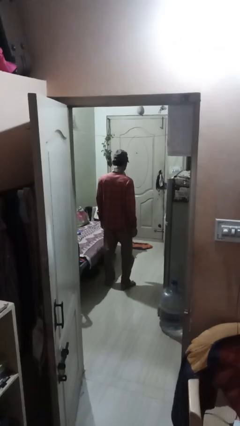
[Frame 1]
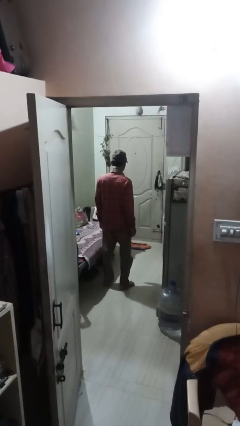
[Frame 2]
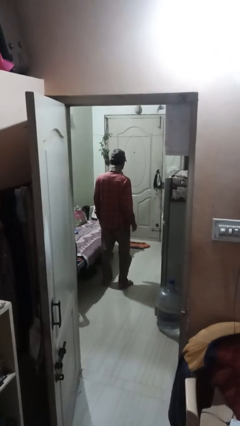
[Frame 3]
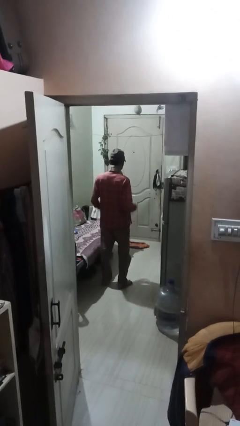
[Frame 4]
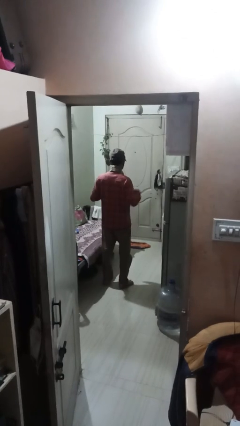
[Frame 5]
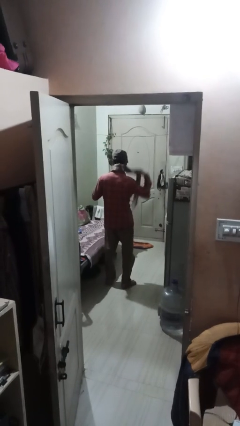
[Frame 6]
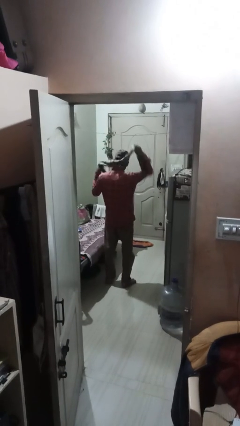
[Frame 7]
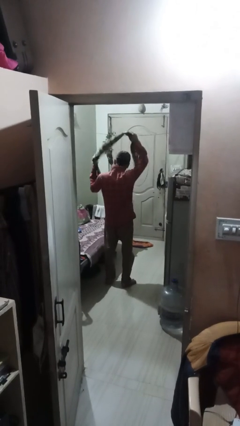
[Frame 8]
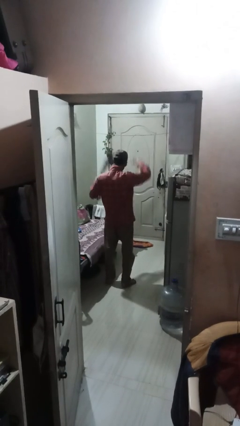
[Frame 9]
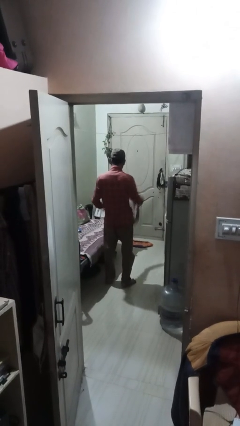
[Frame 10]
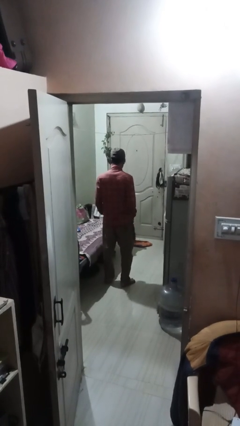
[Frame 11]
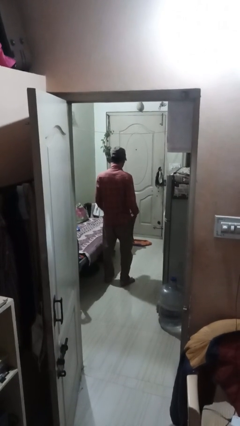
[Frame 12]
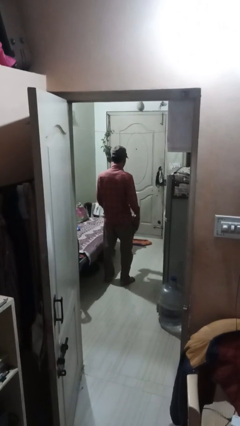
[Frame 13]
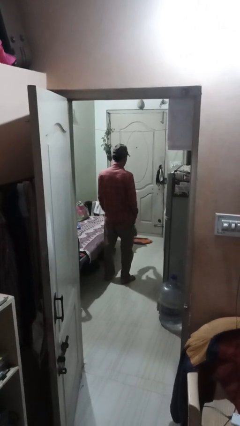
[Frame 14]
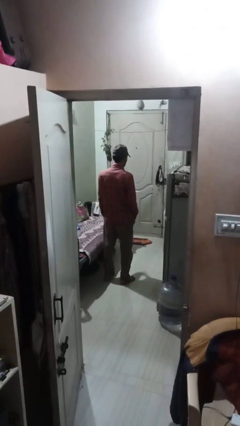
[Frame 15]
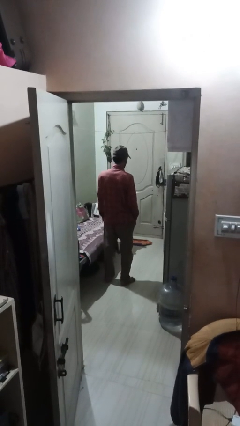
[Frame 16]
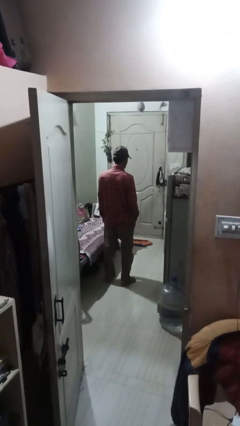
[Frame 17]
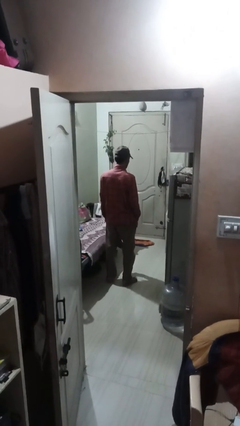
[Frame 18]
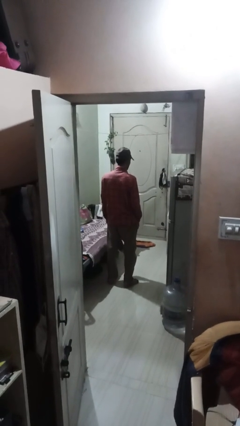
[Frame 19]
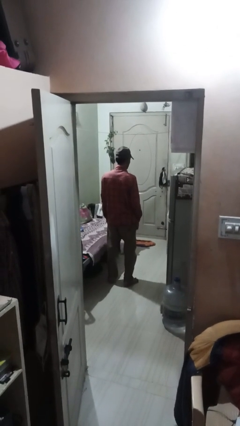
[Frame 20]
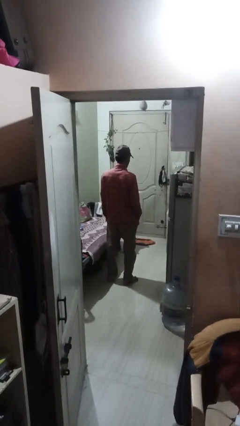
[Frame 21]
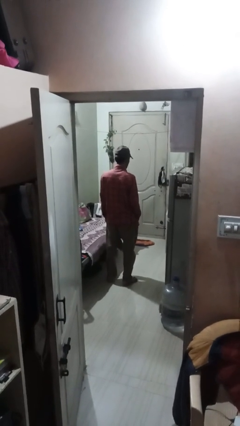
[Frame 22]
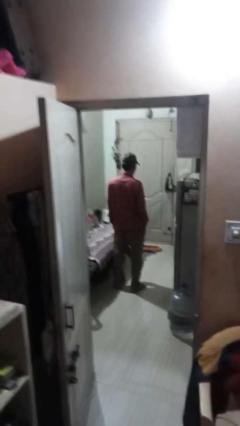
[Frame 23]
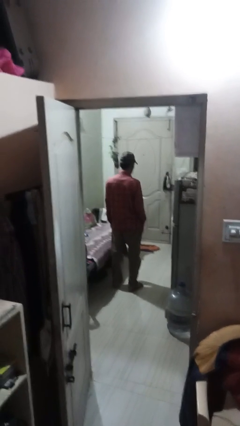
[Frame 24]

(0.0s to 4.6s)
person takes off scarf

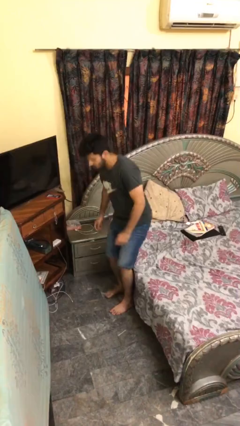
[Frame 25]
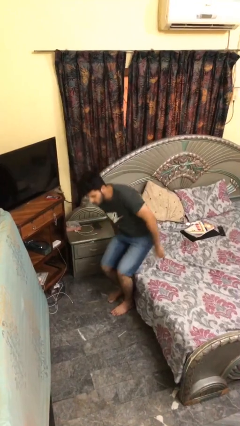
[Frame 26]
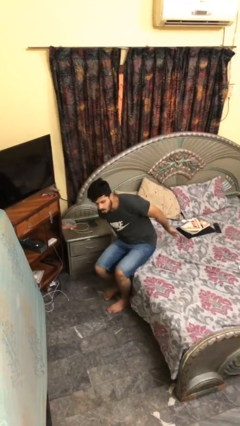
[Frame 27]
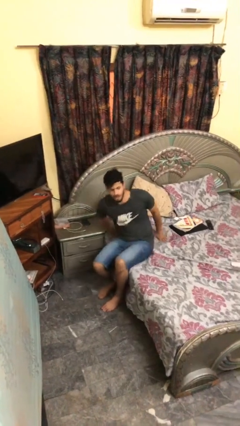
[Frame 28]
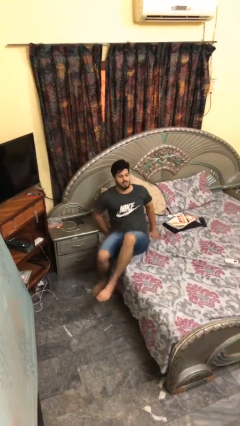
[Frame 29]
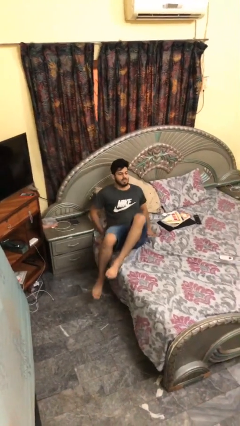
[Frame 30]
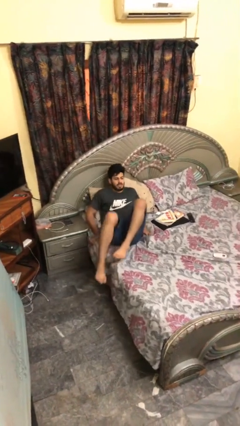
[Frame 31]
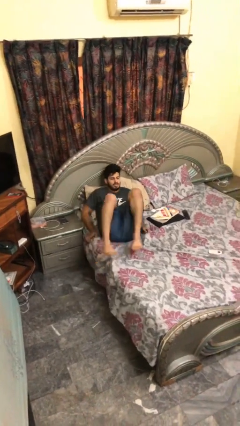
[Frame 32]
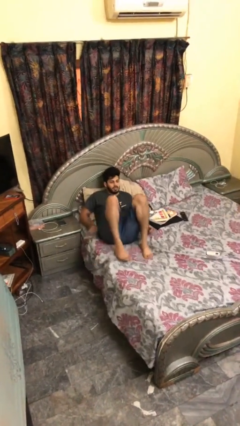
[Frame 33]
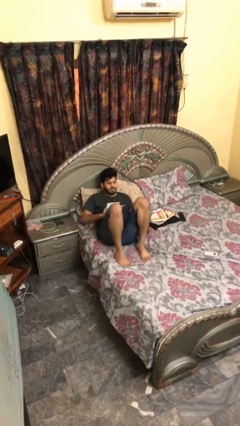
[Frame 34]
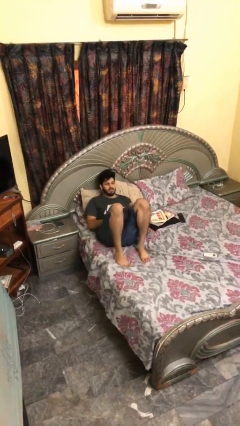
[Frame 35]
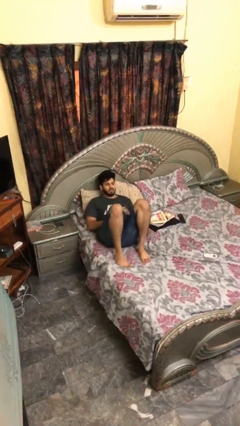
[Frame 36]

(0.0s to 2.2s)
person lies down on bed

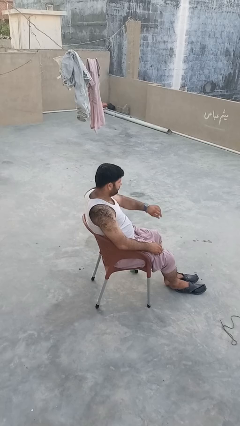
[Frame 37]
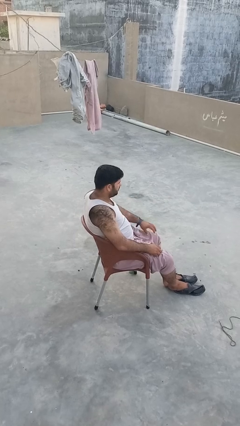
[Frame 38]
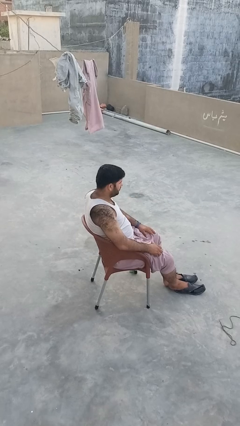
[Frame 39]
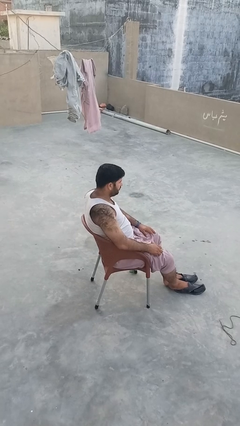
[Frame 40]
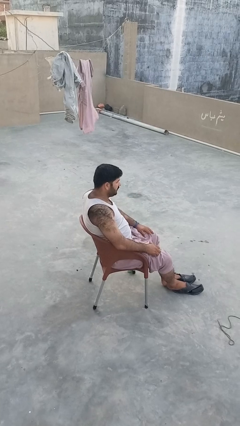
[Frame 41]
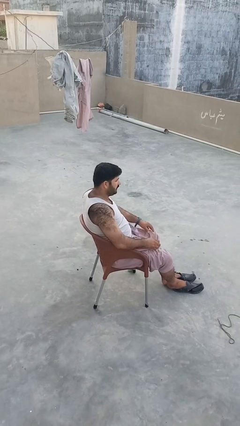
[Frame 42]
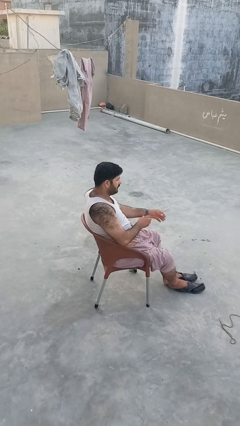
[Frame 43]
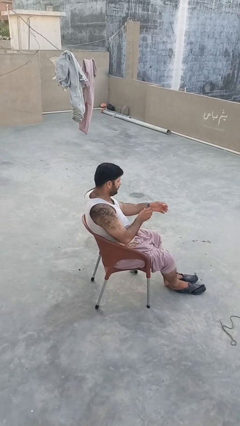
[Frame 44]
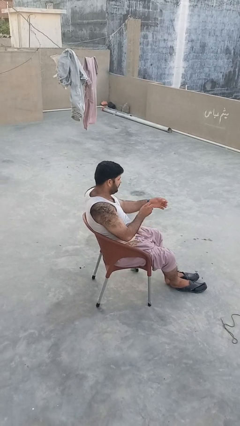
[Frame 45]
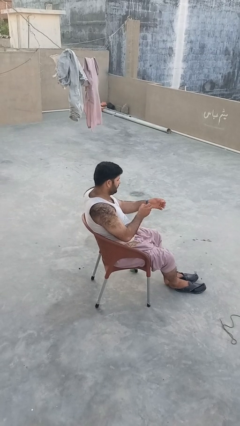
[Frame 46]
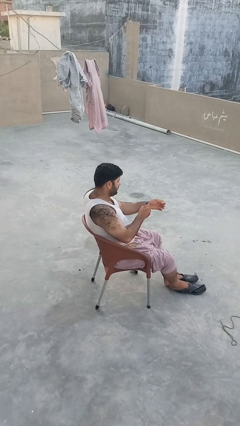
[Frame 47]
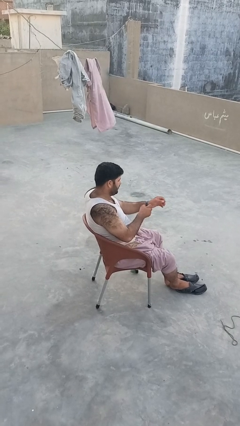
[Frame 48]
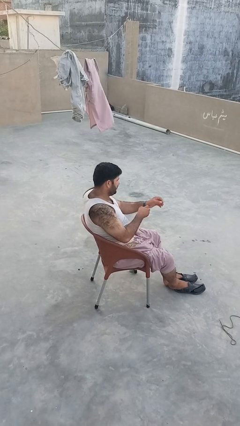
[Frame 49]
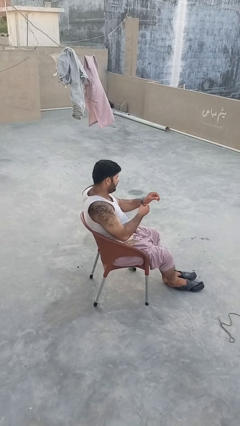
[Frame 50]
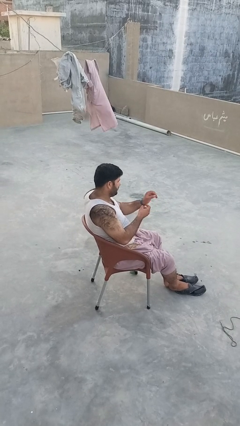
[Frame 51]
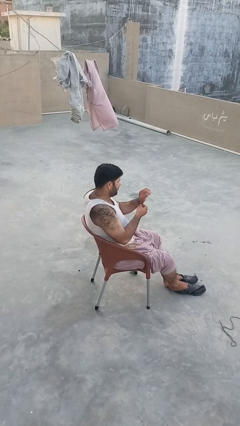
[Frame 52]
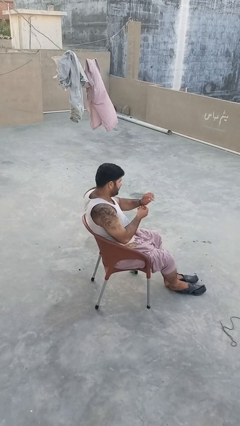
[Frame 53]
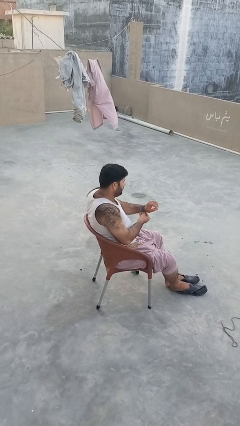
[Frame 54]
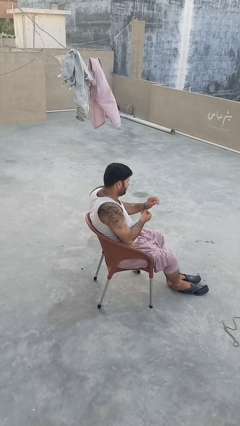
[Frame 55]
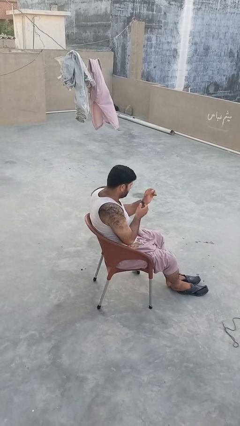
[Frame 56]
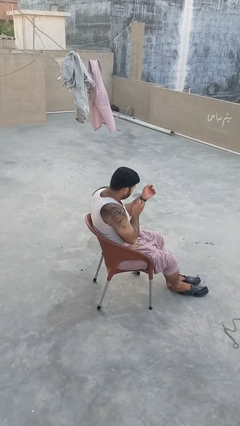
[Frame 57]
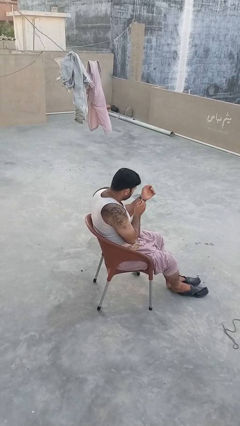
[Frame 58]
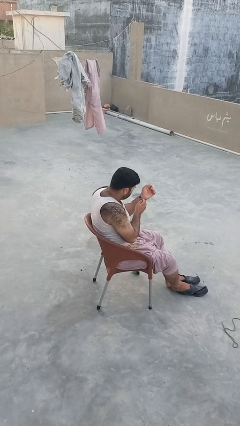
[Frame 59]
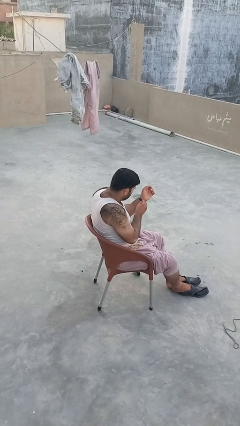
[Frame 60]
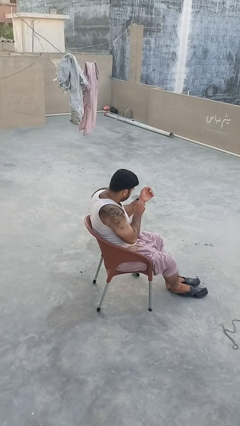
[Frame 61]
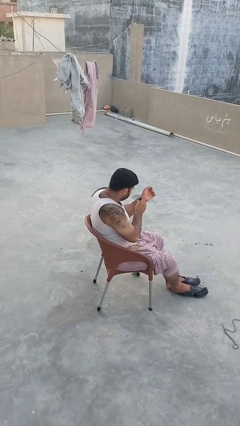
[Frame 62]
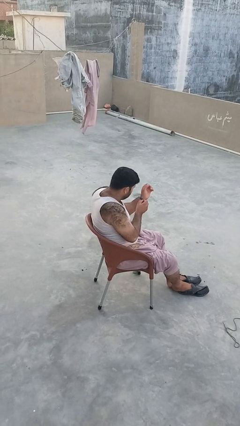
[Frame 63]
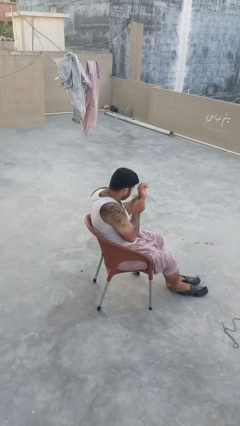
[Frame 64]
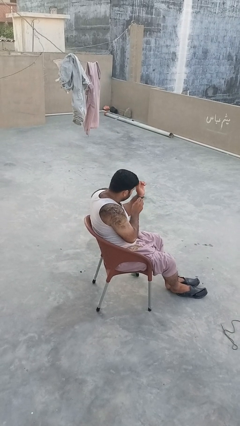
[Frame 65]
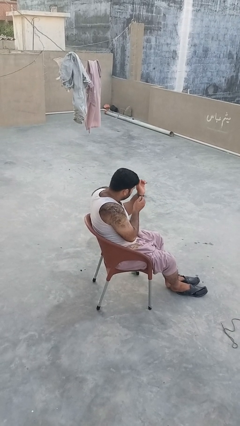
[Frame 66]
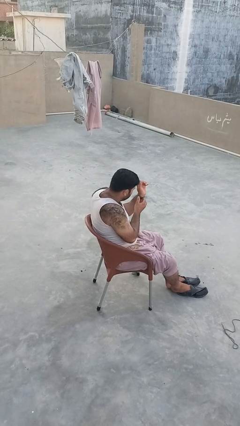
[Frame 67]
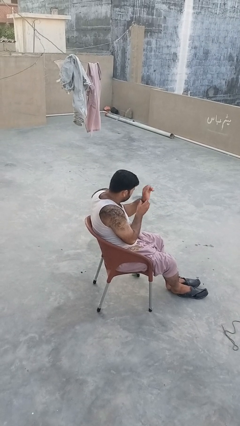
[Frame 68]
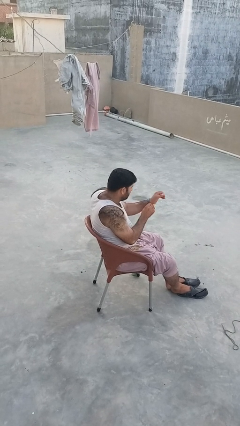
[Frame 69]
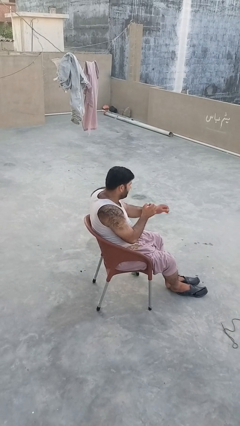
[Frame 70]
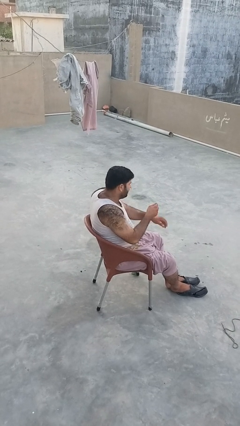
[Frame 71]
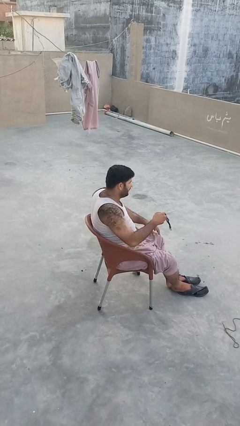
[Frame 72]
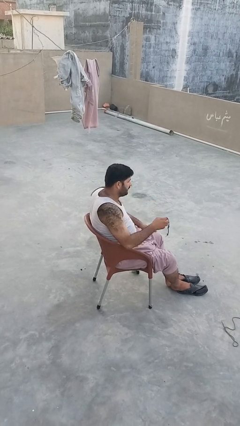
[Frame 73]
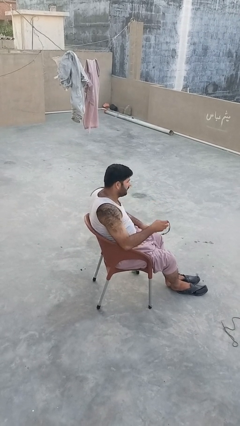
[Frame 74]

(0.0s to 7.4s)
person takes off wristwatch

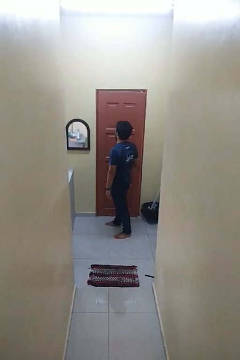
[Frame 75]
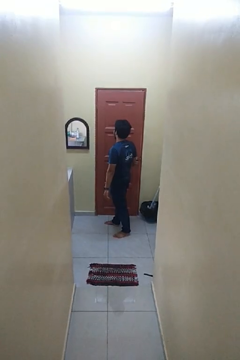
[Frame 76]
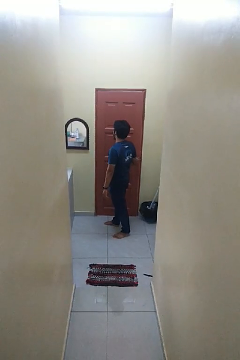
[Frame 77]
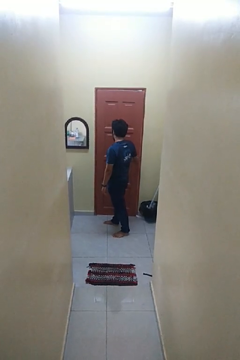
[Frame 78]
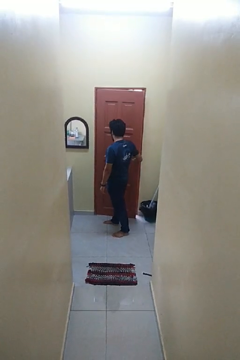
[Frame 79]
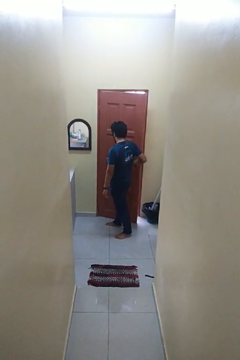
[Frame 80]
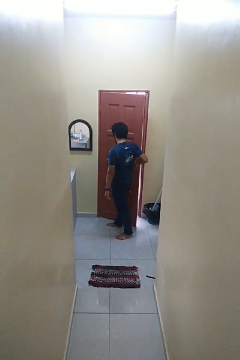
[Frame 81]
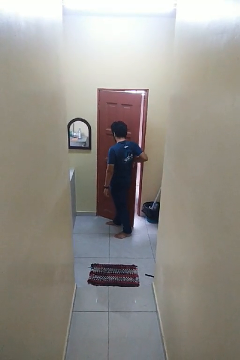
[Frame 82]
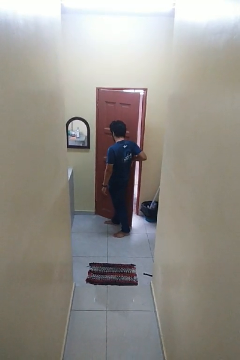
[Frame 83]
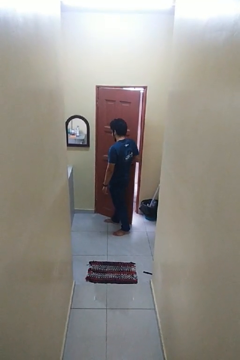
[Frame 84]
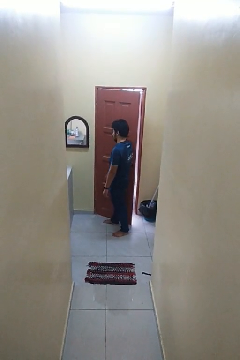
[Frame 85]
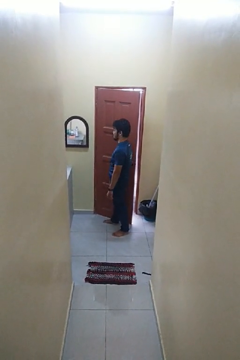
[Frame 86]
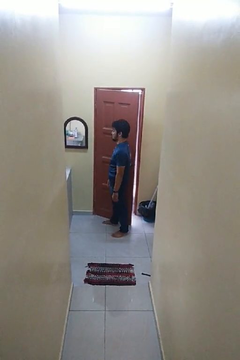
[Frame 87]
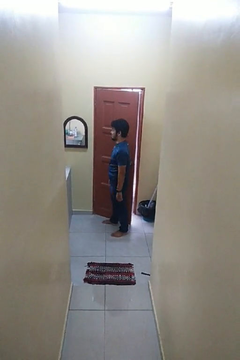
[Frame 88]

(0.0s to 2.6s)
person opens facility door

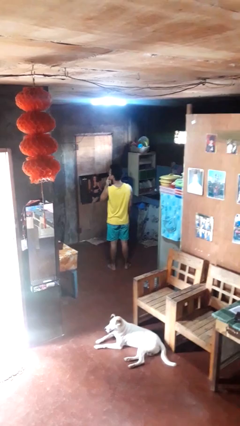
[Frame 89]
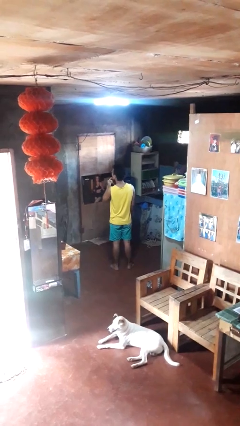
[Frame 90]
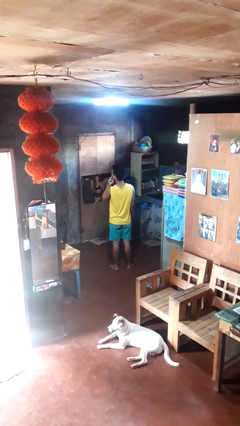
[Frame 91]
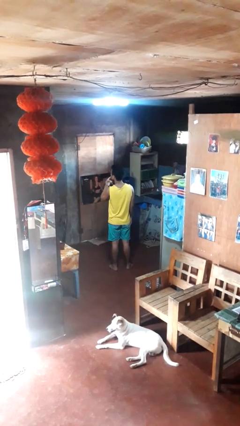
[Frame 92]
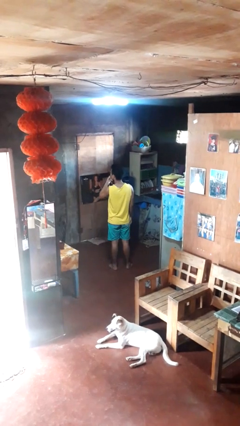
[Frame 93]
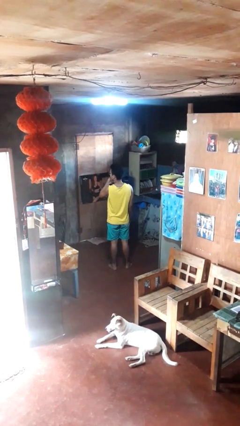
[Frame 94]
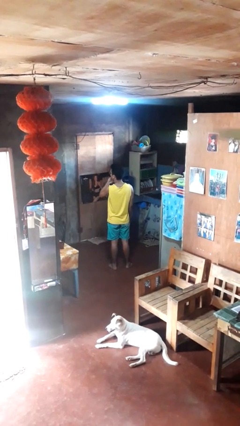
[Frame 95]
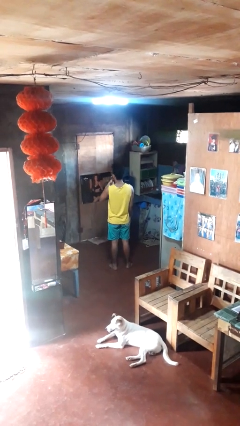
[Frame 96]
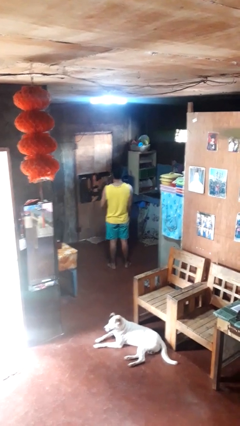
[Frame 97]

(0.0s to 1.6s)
person licks fingers
